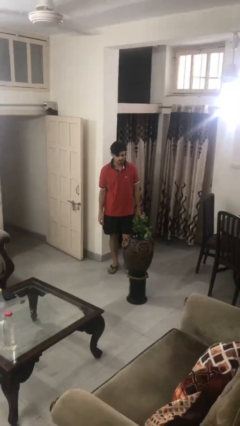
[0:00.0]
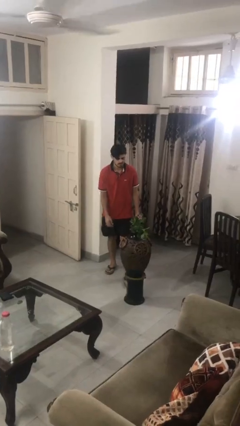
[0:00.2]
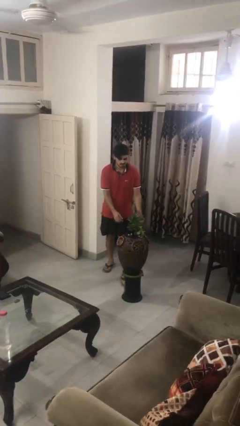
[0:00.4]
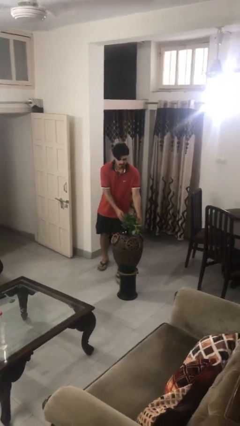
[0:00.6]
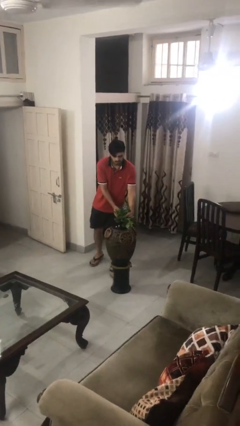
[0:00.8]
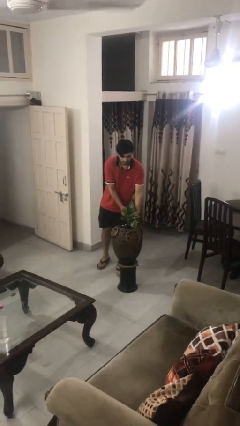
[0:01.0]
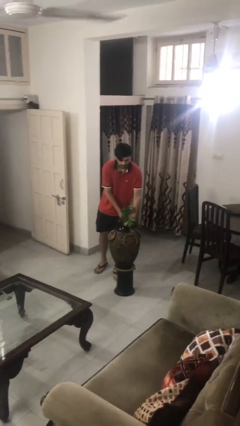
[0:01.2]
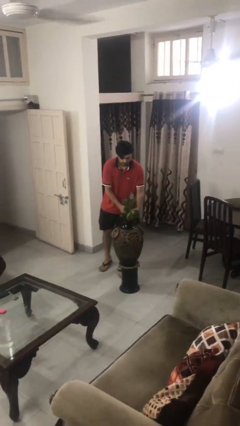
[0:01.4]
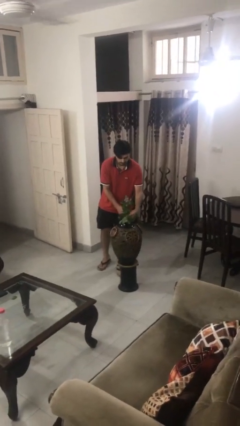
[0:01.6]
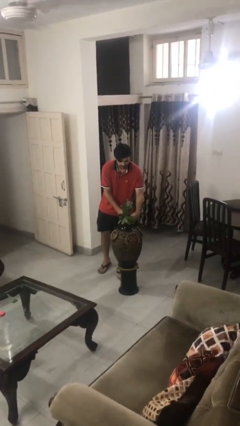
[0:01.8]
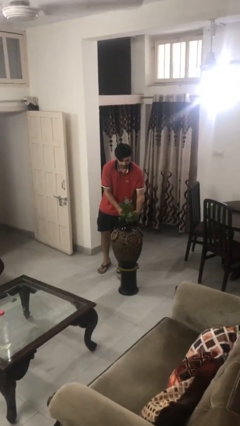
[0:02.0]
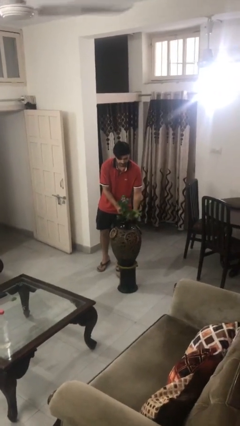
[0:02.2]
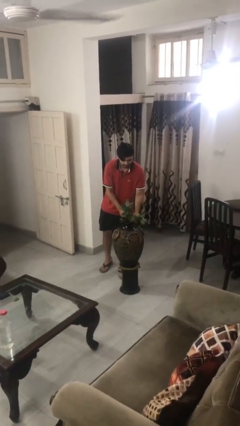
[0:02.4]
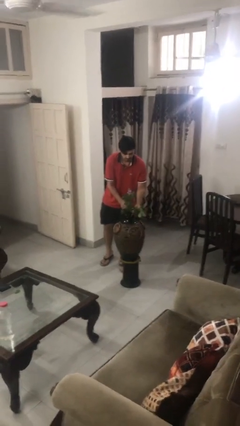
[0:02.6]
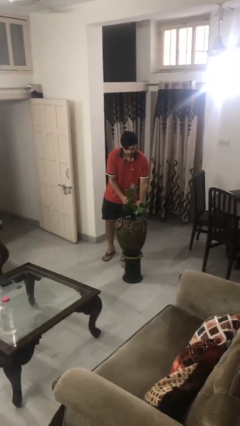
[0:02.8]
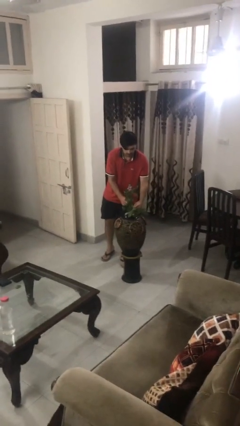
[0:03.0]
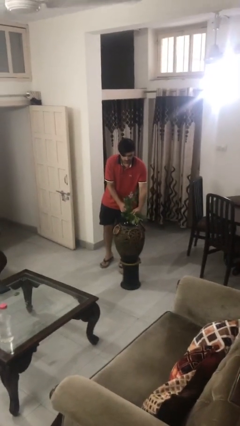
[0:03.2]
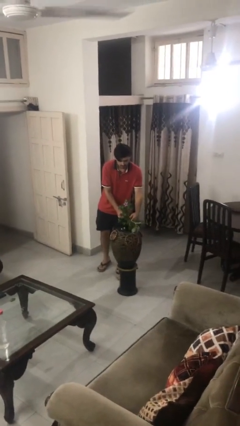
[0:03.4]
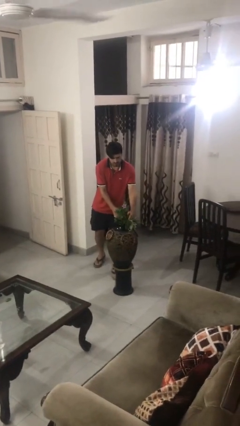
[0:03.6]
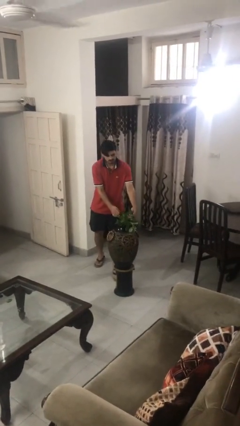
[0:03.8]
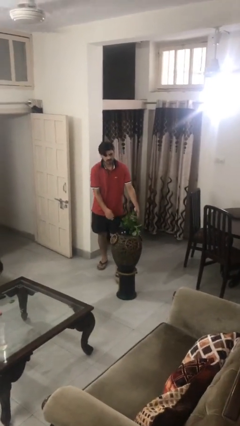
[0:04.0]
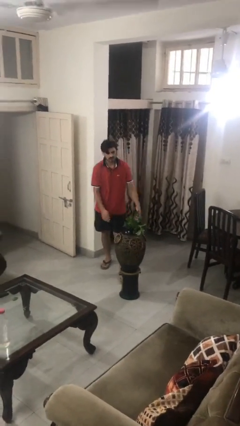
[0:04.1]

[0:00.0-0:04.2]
person arranges flowers in vase

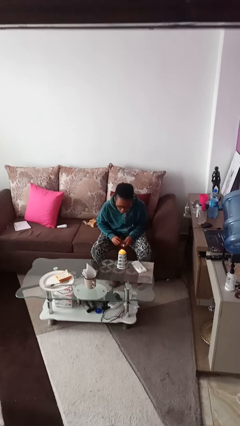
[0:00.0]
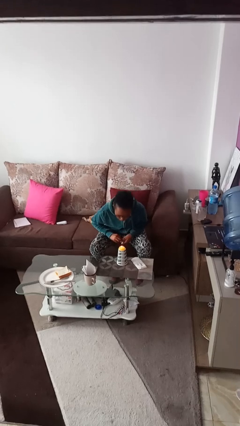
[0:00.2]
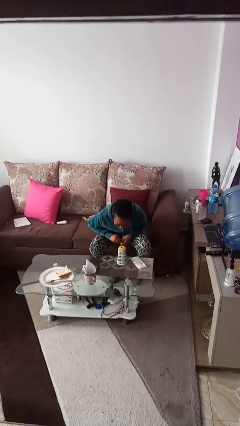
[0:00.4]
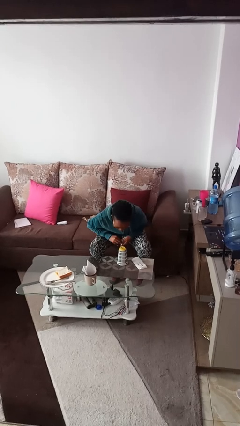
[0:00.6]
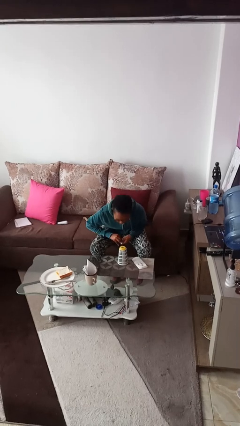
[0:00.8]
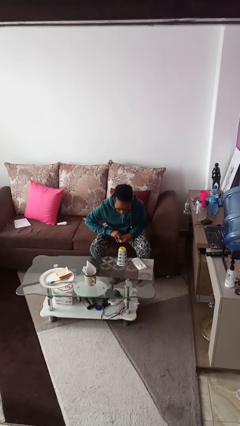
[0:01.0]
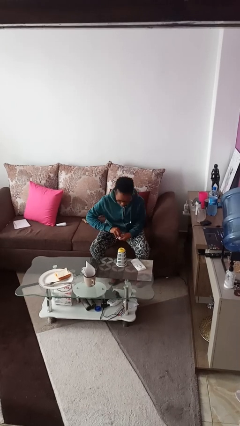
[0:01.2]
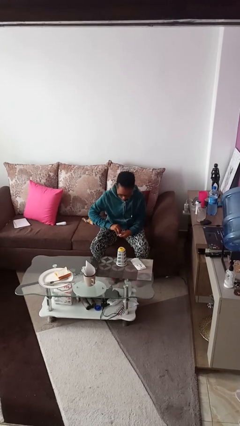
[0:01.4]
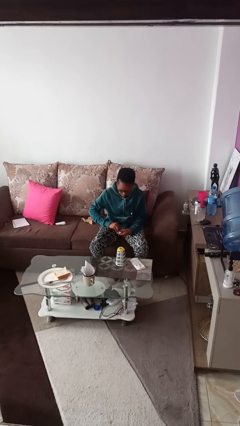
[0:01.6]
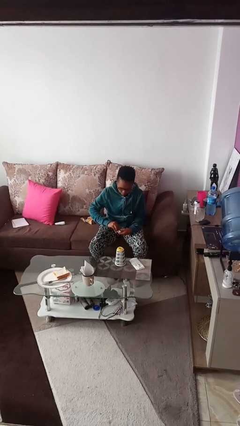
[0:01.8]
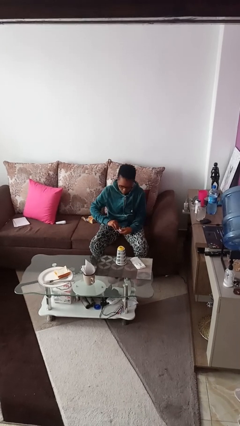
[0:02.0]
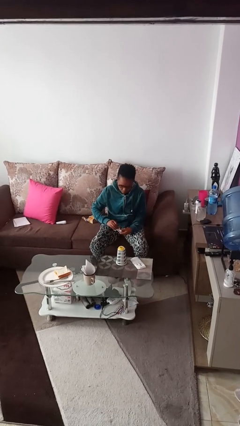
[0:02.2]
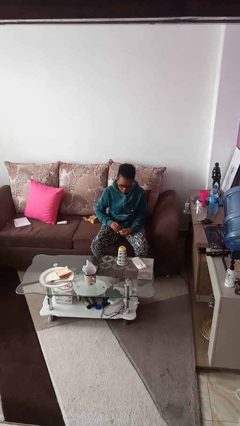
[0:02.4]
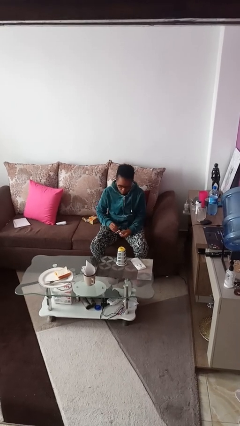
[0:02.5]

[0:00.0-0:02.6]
person extinguishes candle

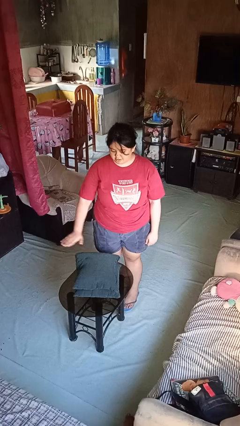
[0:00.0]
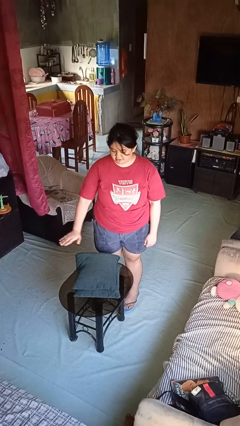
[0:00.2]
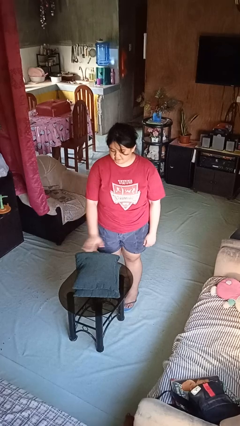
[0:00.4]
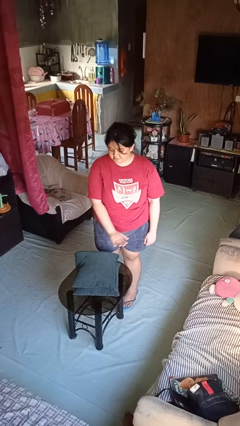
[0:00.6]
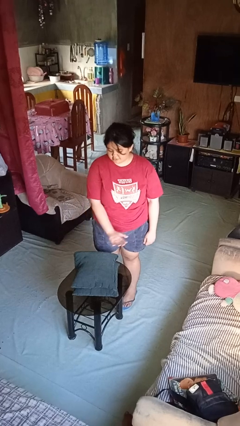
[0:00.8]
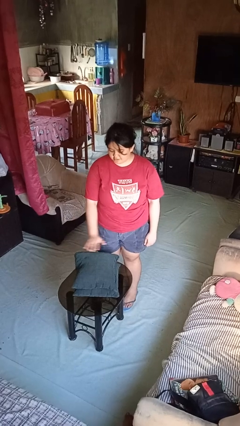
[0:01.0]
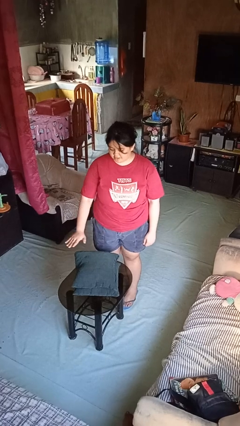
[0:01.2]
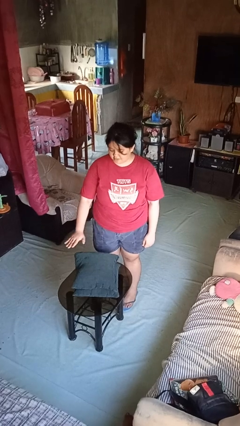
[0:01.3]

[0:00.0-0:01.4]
person waves hand over object

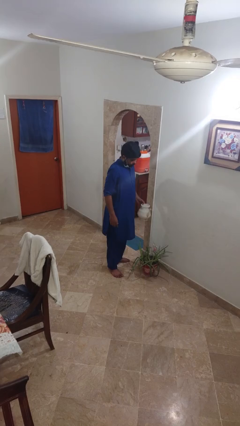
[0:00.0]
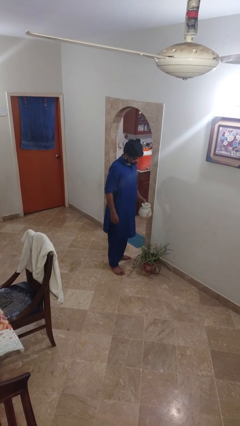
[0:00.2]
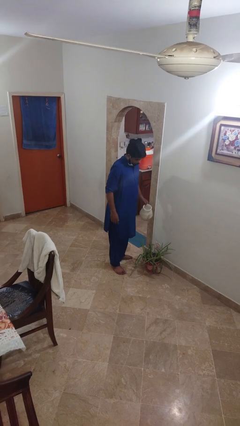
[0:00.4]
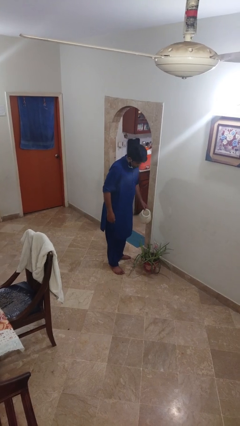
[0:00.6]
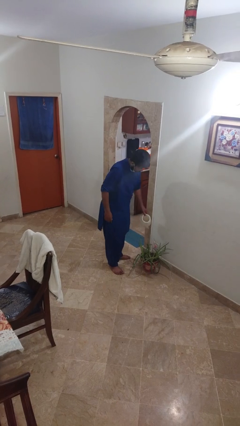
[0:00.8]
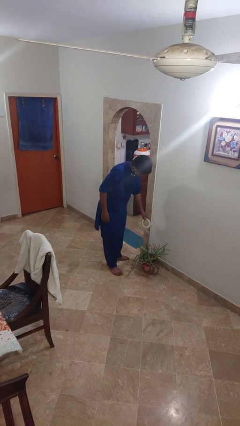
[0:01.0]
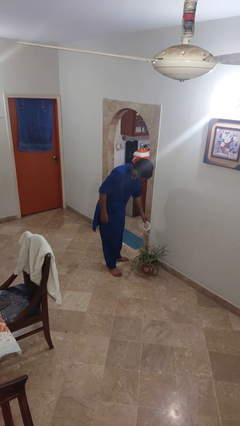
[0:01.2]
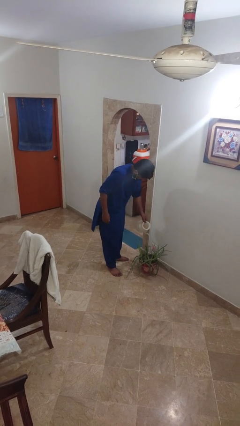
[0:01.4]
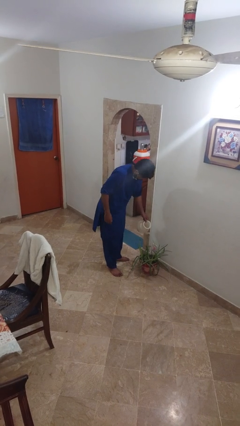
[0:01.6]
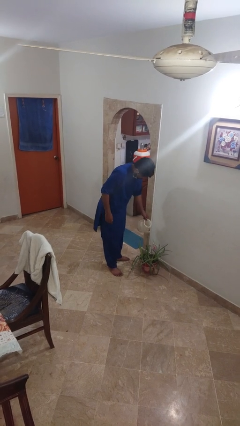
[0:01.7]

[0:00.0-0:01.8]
person waters houseplant

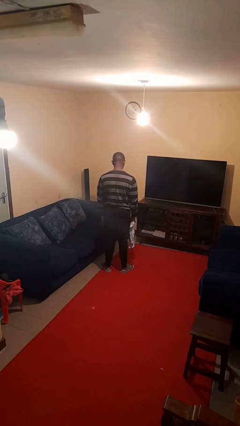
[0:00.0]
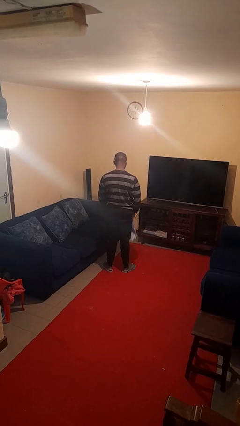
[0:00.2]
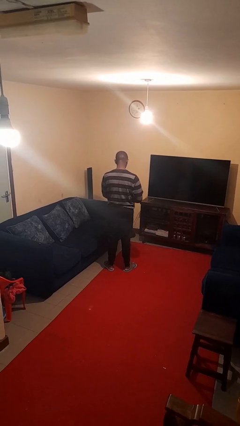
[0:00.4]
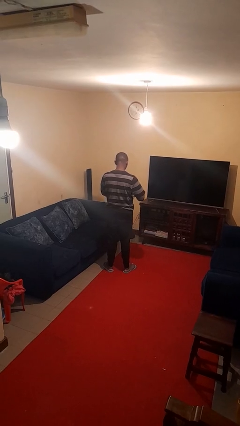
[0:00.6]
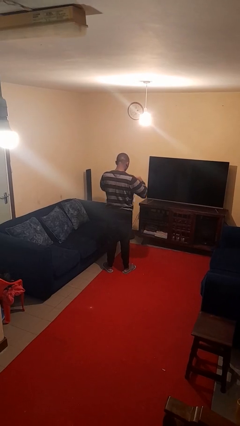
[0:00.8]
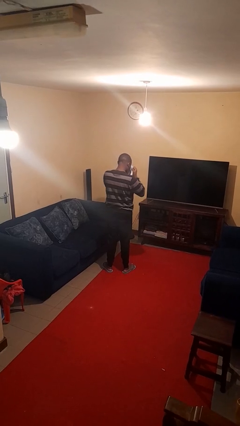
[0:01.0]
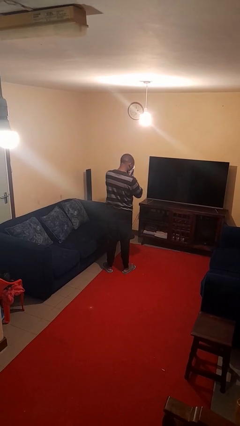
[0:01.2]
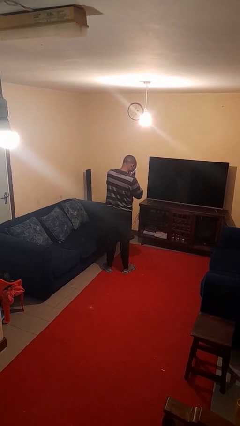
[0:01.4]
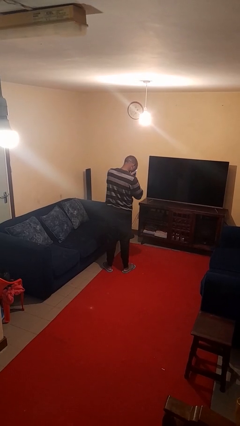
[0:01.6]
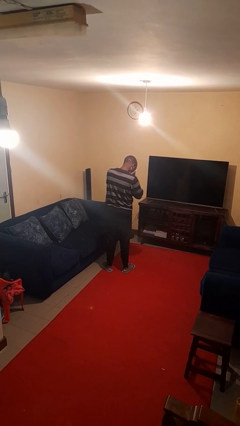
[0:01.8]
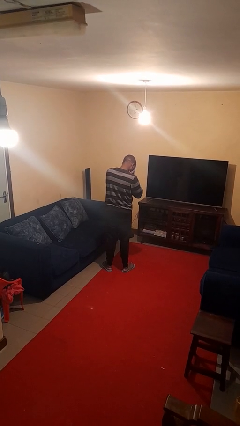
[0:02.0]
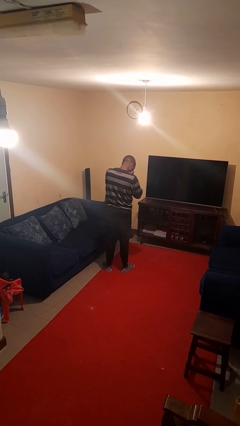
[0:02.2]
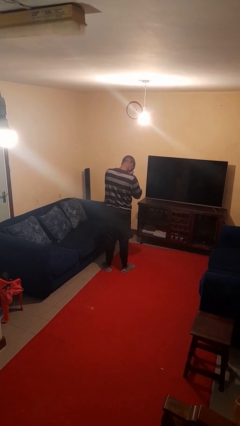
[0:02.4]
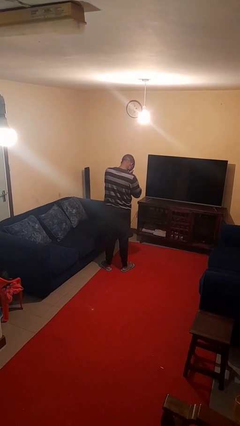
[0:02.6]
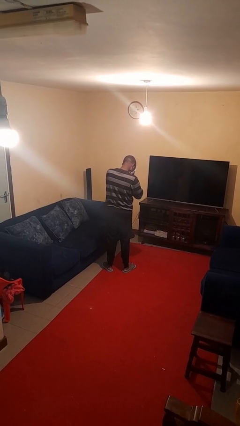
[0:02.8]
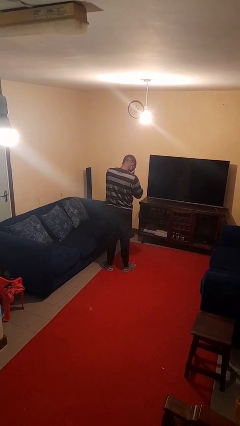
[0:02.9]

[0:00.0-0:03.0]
person blows nose

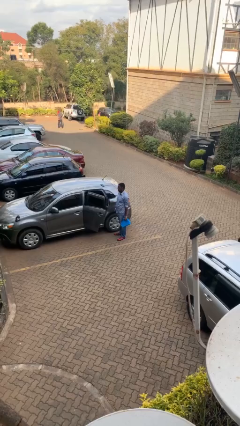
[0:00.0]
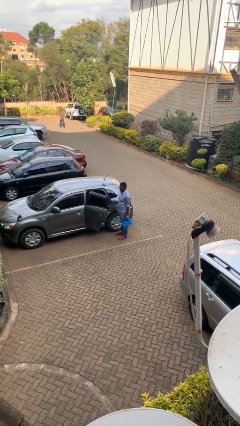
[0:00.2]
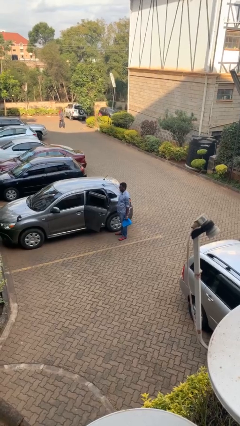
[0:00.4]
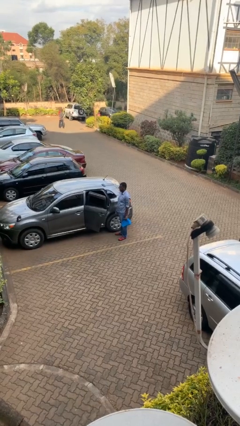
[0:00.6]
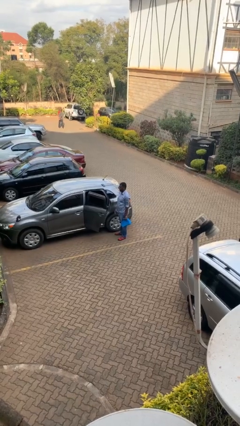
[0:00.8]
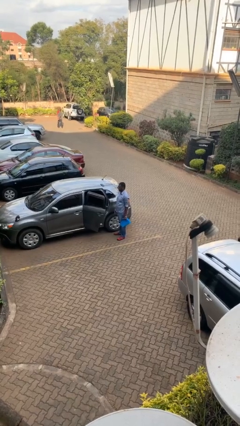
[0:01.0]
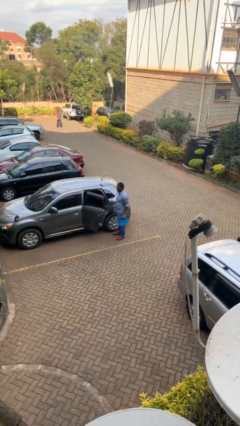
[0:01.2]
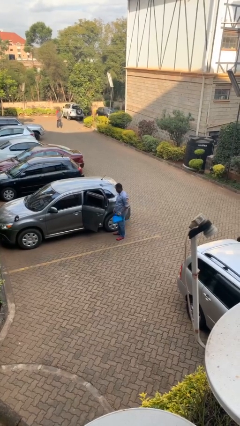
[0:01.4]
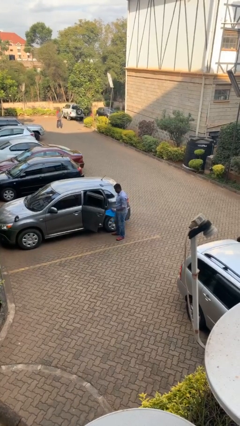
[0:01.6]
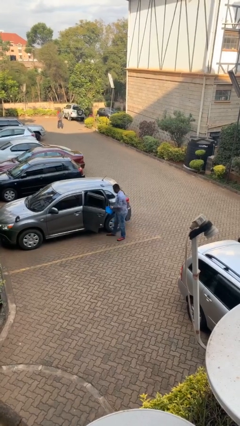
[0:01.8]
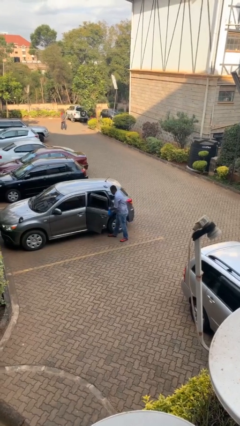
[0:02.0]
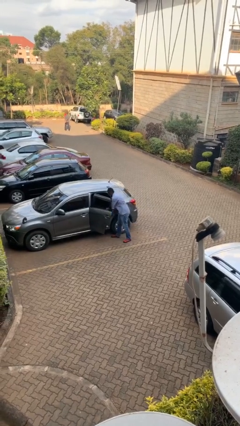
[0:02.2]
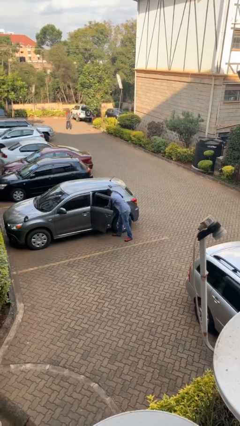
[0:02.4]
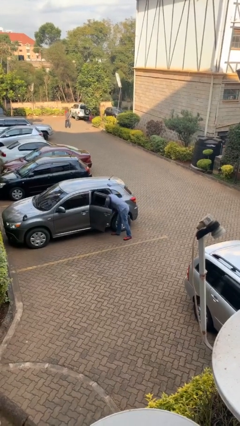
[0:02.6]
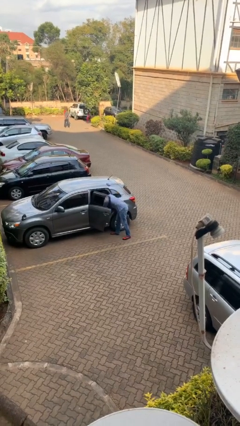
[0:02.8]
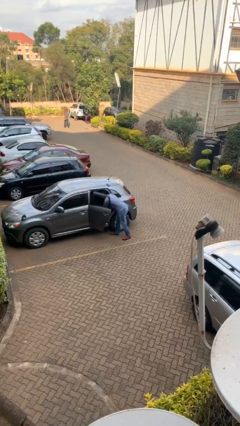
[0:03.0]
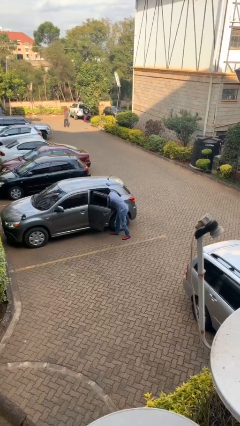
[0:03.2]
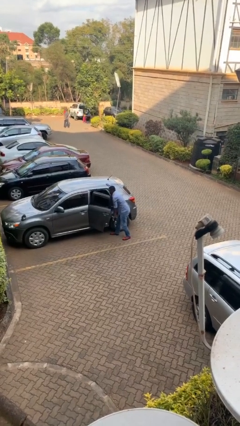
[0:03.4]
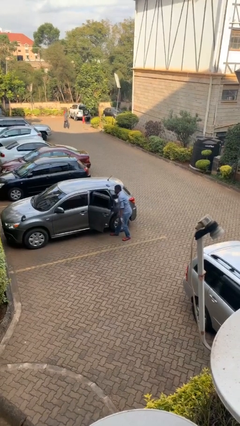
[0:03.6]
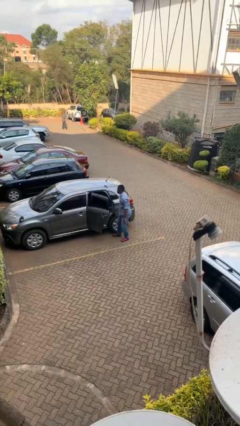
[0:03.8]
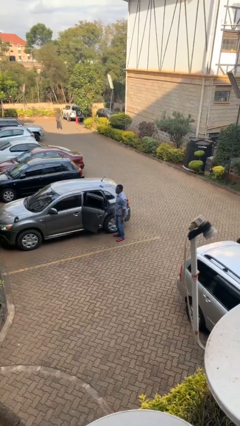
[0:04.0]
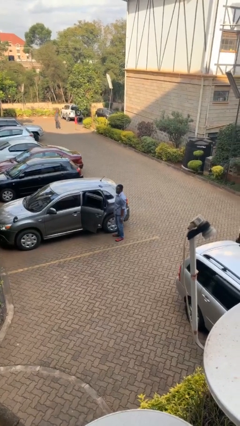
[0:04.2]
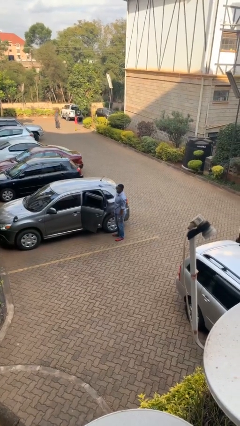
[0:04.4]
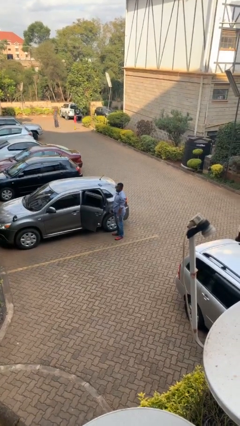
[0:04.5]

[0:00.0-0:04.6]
person loads car
